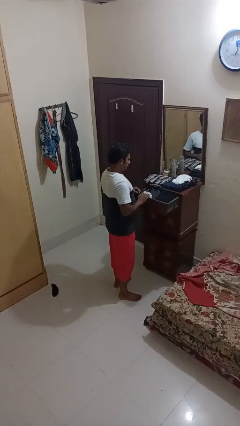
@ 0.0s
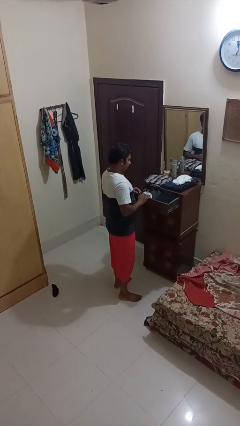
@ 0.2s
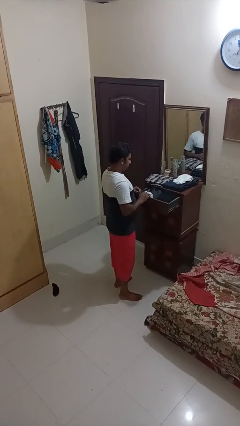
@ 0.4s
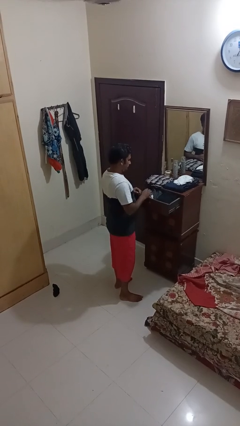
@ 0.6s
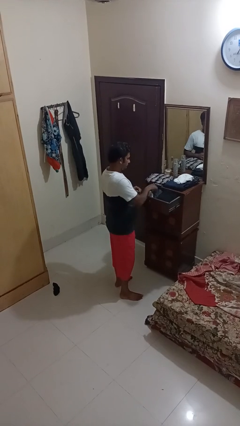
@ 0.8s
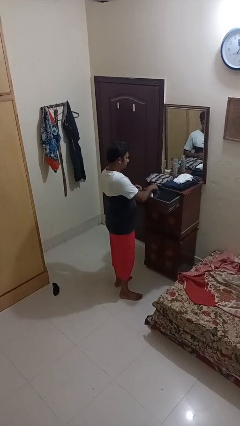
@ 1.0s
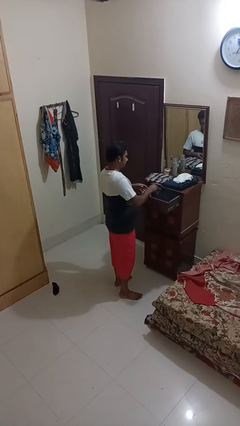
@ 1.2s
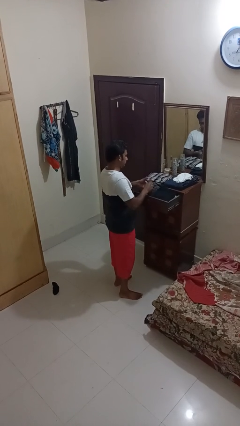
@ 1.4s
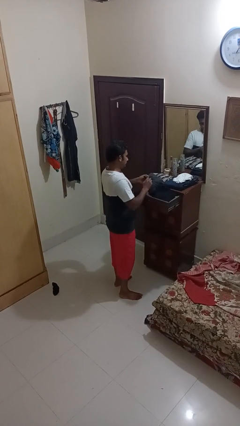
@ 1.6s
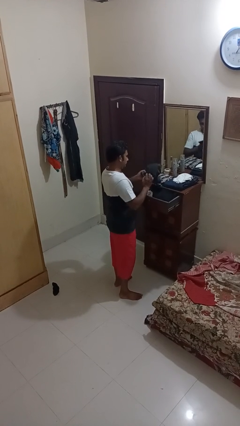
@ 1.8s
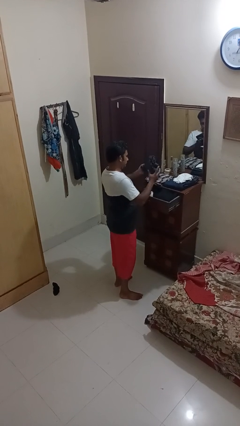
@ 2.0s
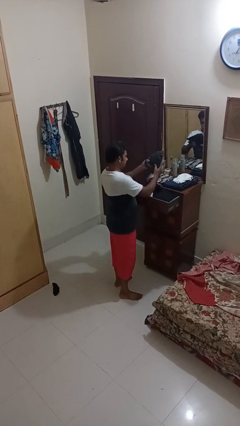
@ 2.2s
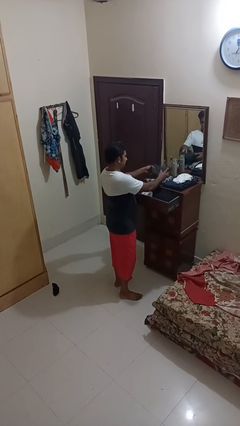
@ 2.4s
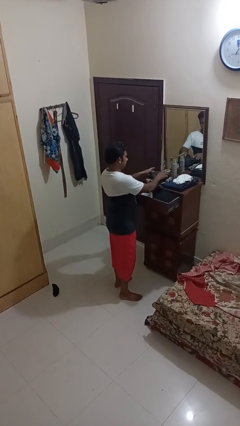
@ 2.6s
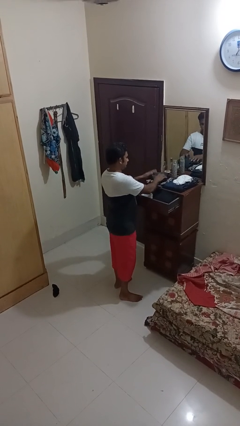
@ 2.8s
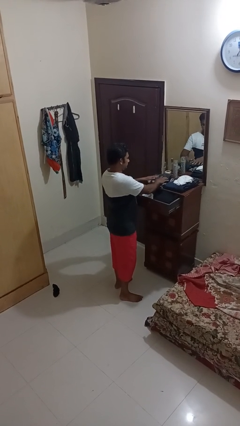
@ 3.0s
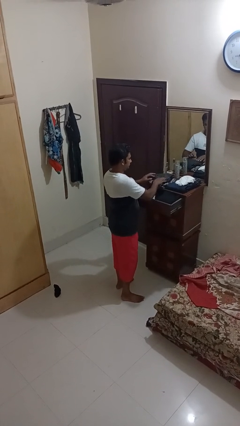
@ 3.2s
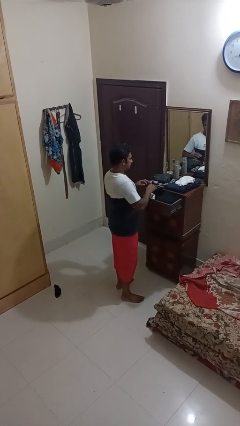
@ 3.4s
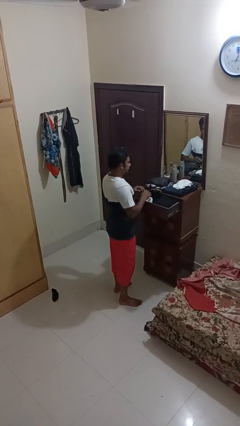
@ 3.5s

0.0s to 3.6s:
person takes clothes from dresser

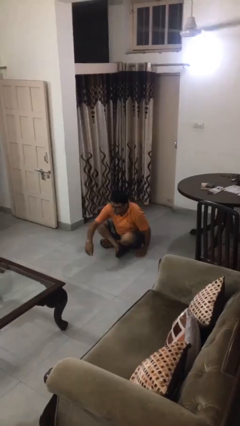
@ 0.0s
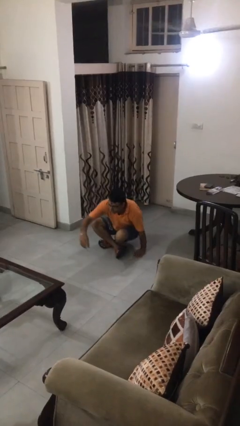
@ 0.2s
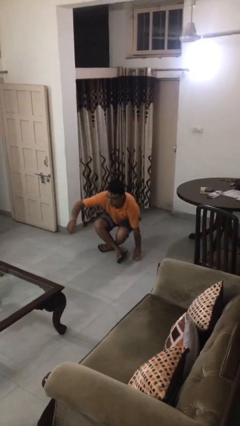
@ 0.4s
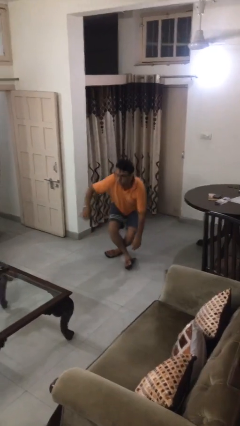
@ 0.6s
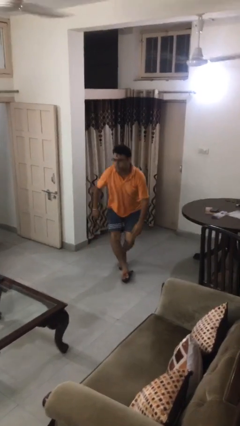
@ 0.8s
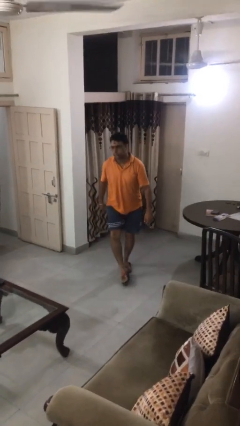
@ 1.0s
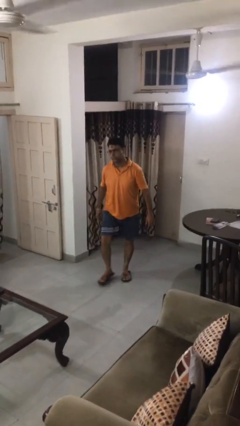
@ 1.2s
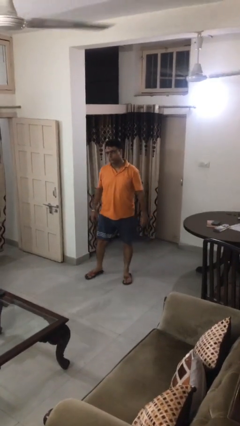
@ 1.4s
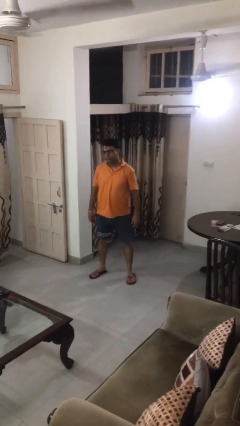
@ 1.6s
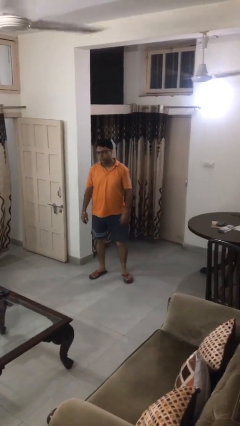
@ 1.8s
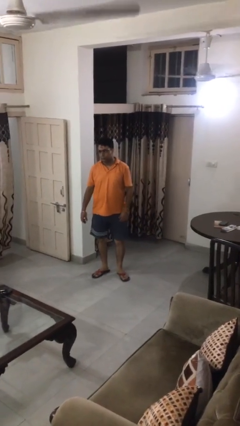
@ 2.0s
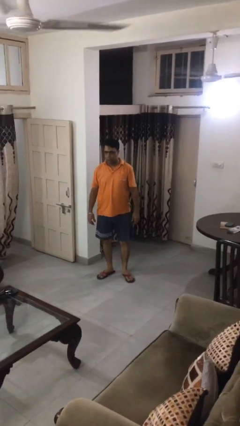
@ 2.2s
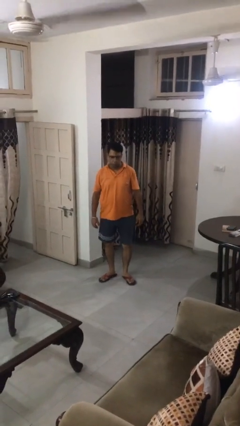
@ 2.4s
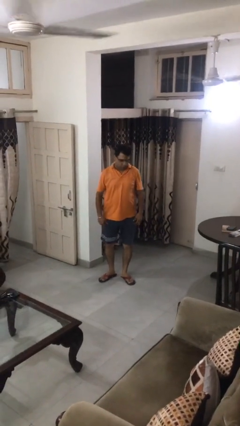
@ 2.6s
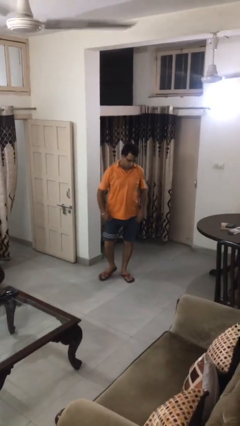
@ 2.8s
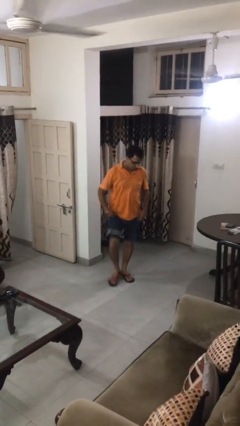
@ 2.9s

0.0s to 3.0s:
person stands up from floor

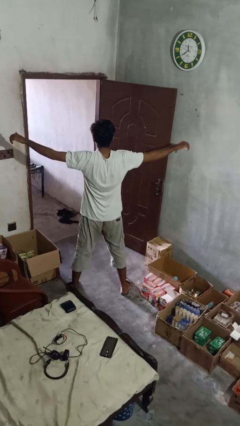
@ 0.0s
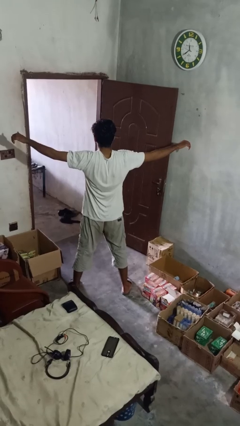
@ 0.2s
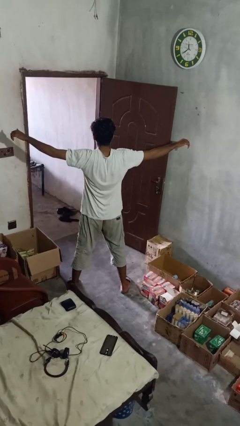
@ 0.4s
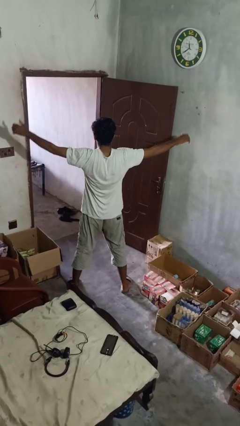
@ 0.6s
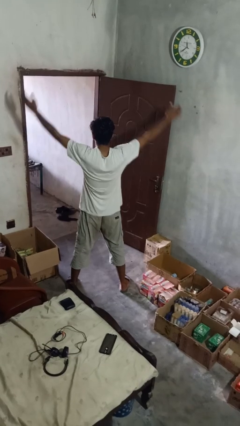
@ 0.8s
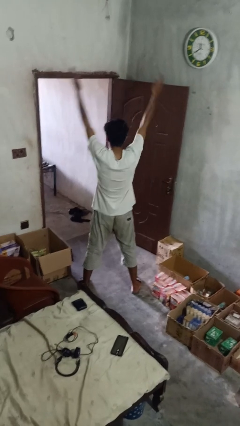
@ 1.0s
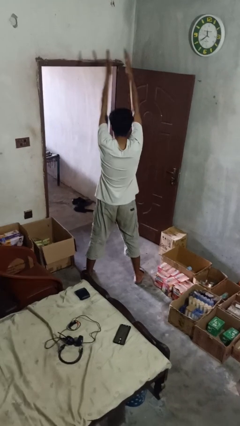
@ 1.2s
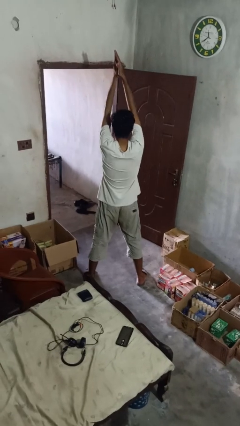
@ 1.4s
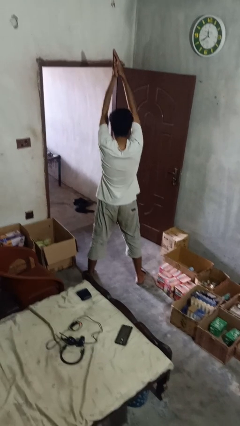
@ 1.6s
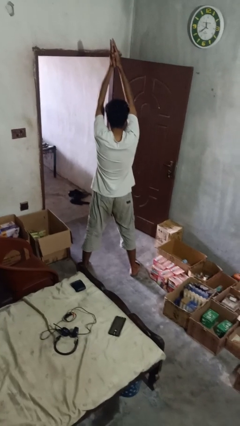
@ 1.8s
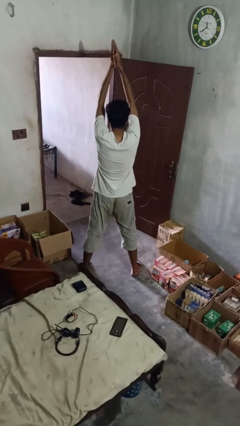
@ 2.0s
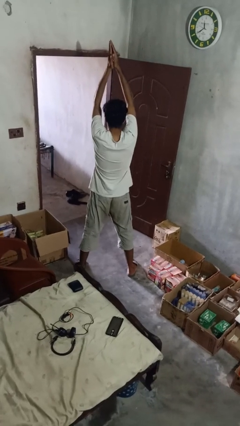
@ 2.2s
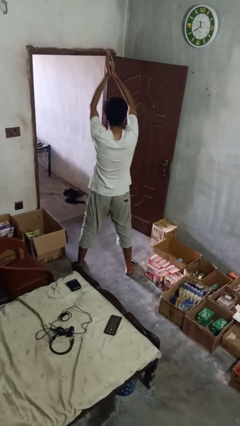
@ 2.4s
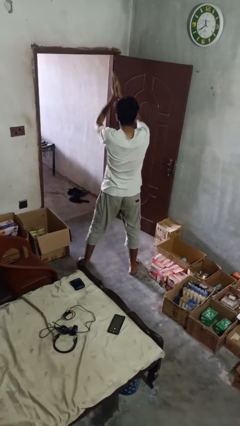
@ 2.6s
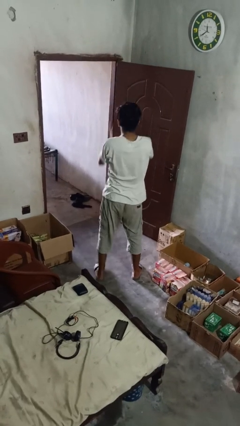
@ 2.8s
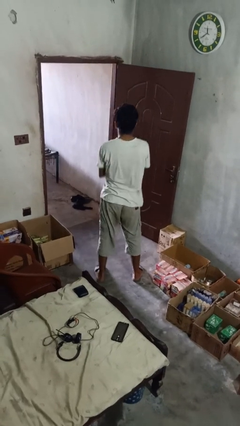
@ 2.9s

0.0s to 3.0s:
person stretches arms over head

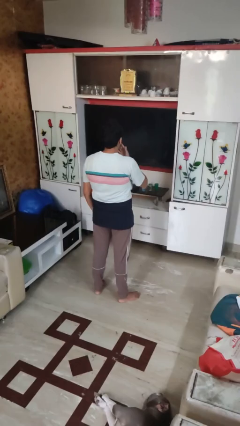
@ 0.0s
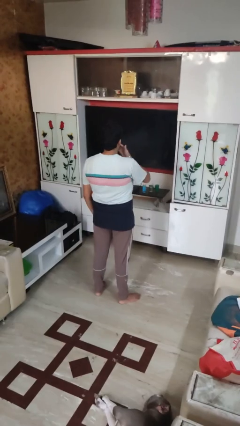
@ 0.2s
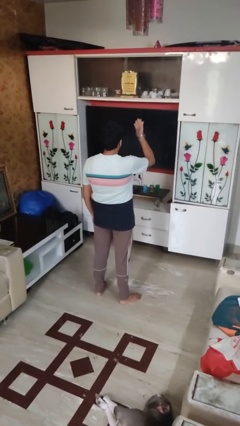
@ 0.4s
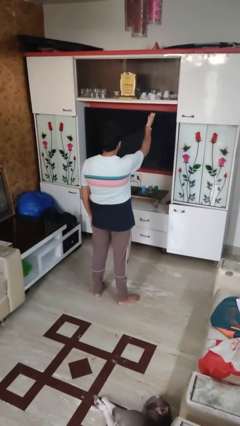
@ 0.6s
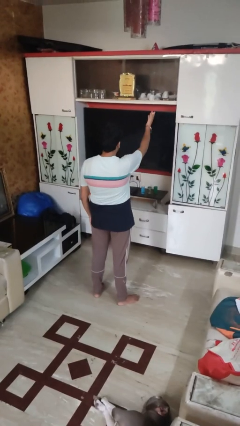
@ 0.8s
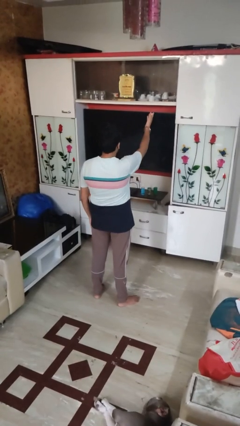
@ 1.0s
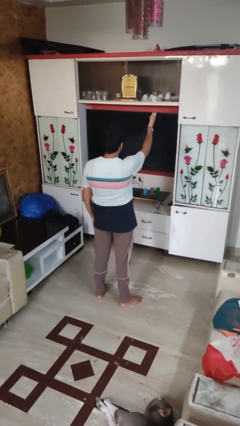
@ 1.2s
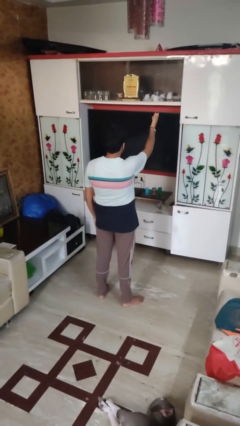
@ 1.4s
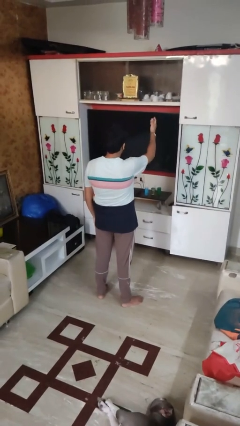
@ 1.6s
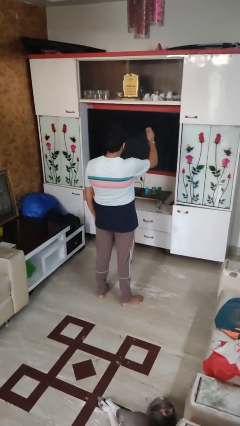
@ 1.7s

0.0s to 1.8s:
person gestures blow kiss

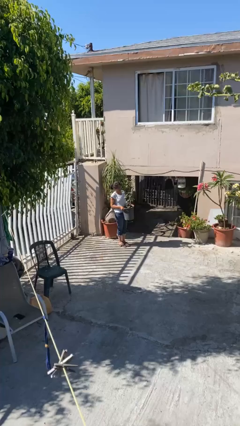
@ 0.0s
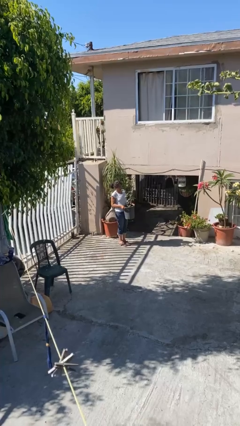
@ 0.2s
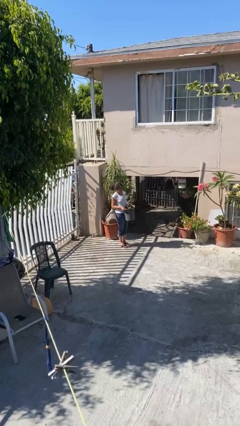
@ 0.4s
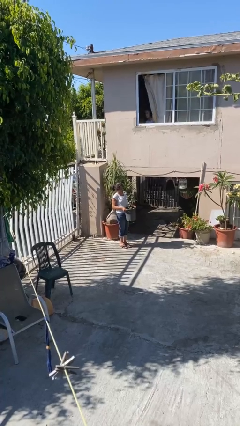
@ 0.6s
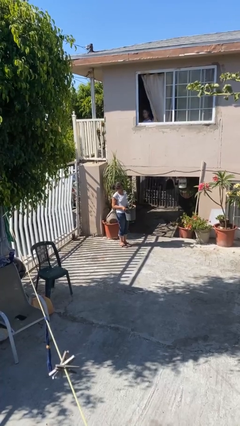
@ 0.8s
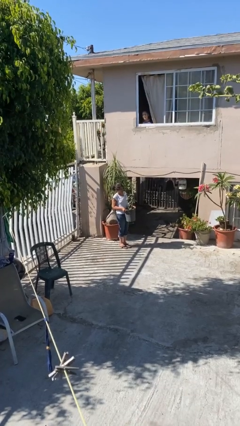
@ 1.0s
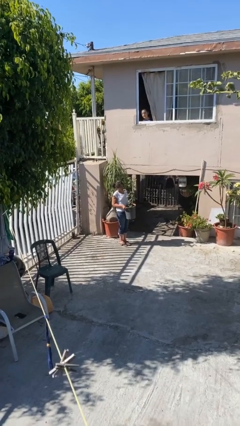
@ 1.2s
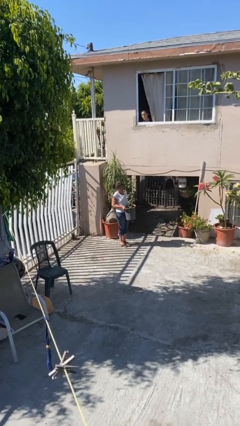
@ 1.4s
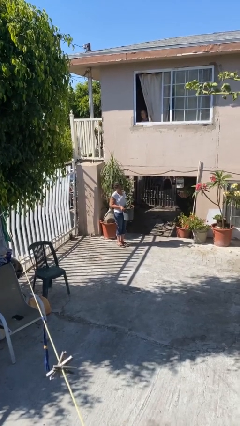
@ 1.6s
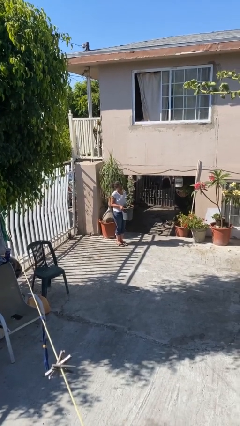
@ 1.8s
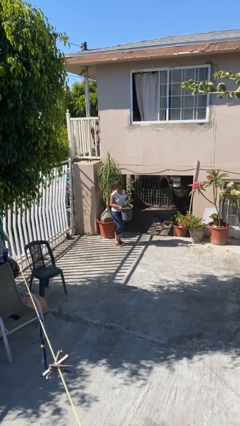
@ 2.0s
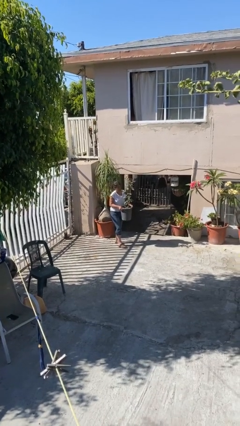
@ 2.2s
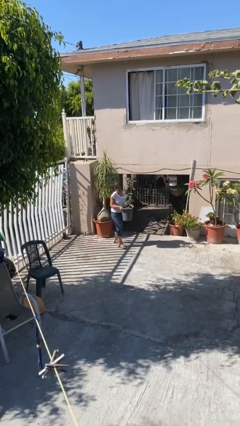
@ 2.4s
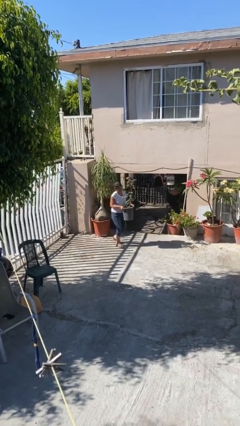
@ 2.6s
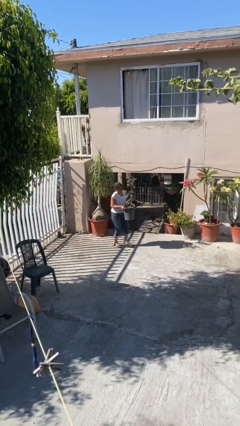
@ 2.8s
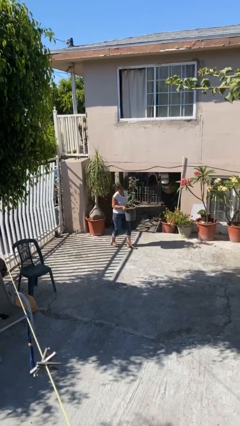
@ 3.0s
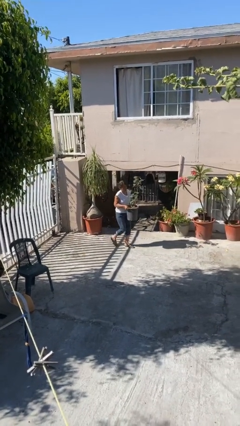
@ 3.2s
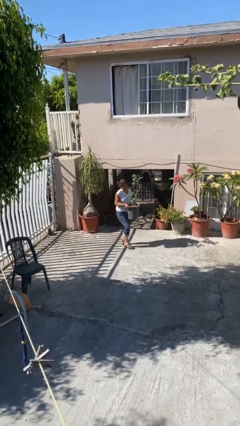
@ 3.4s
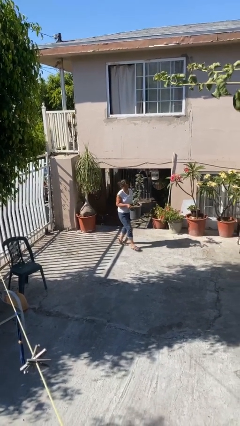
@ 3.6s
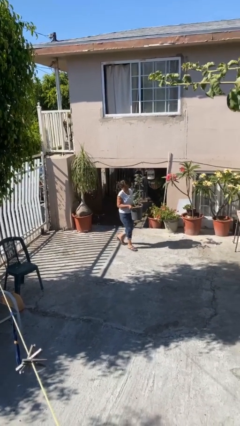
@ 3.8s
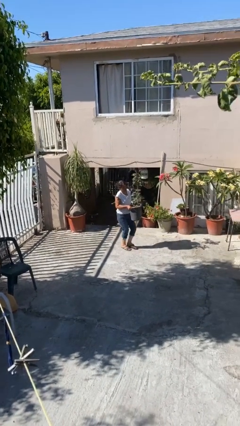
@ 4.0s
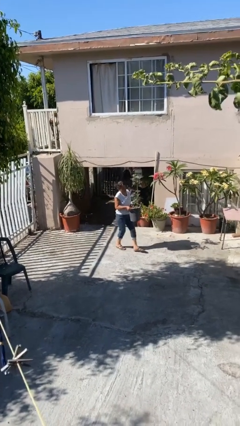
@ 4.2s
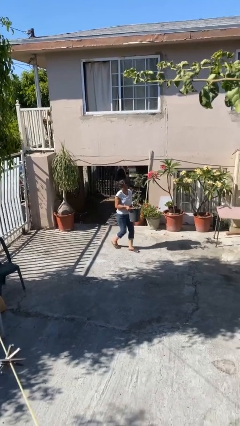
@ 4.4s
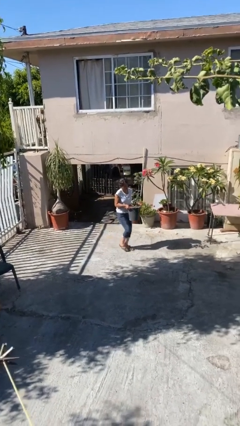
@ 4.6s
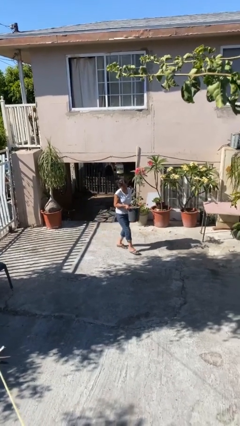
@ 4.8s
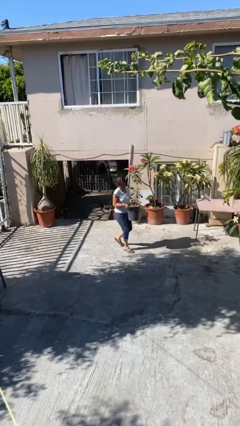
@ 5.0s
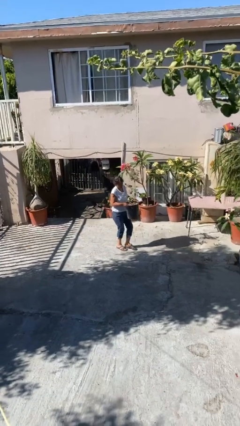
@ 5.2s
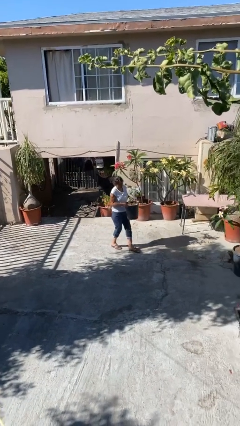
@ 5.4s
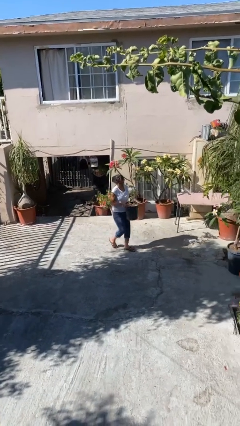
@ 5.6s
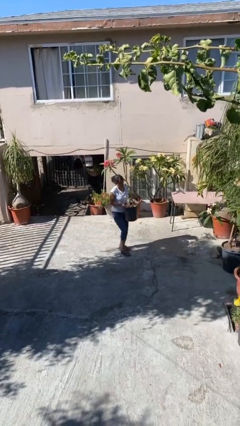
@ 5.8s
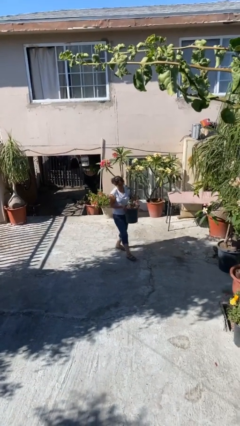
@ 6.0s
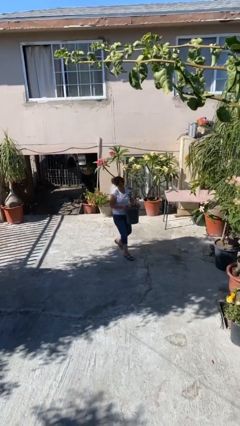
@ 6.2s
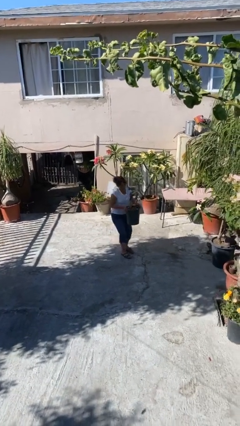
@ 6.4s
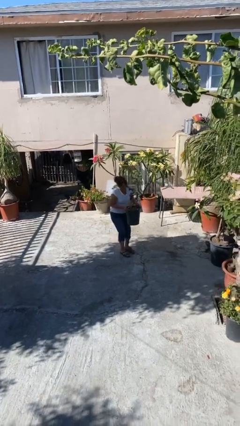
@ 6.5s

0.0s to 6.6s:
person carries heavy object
